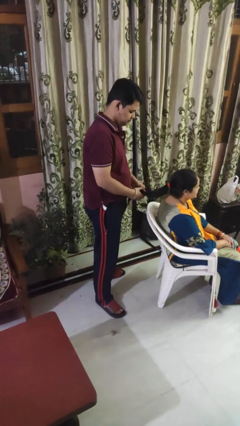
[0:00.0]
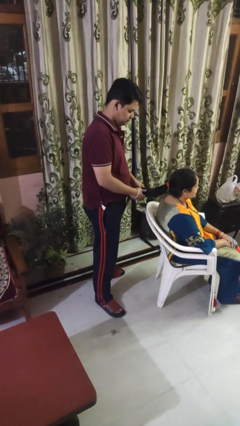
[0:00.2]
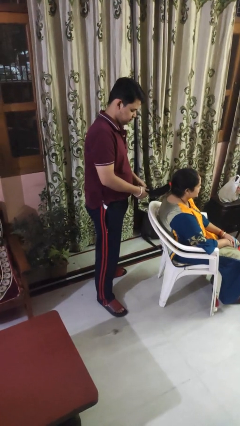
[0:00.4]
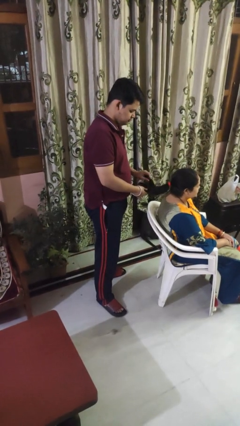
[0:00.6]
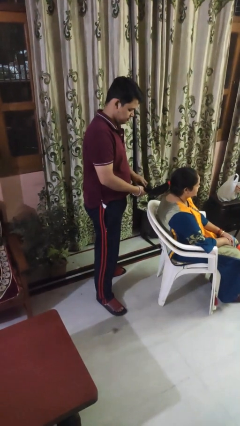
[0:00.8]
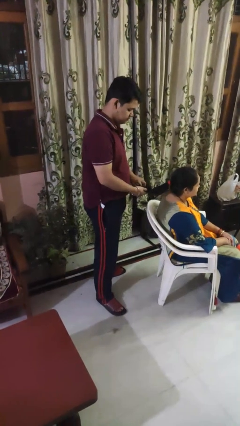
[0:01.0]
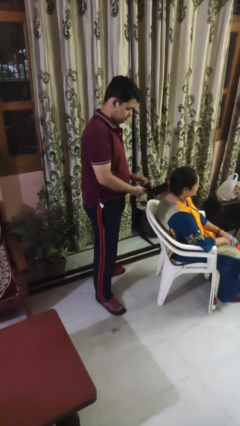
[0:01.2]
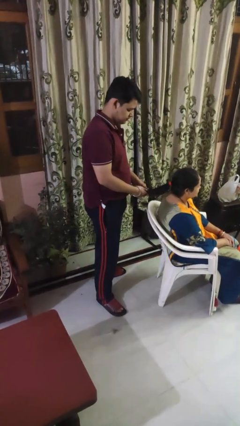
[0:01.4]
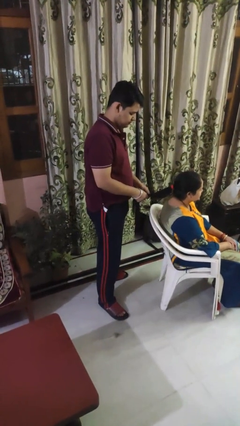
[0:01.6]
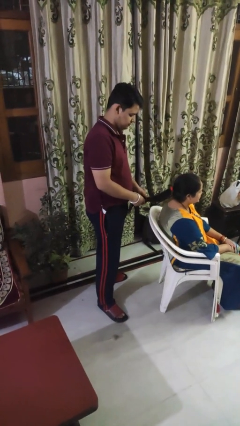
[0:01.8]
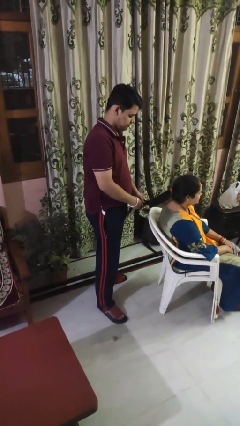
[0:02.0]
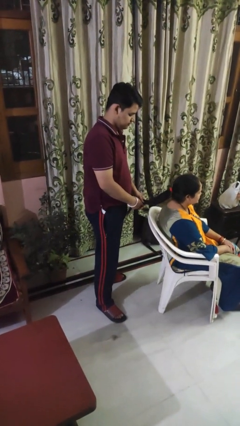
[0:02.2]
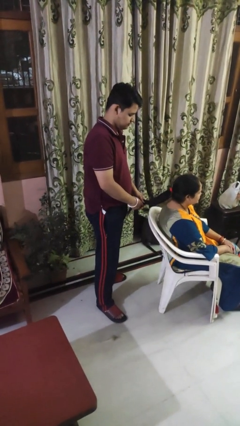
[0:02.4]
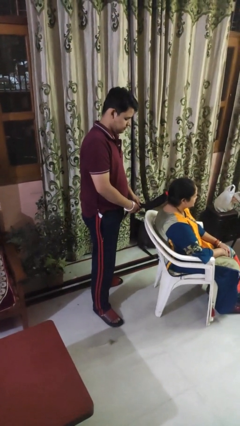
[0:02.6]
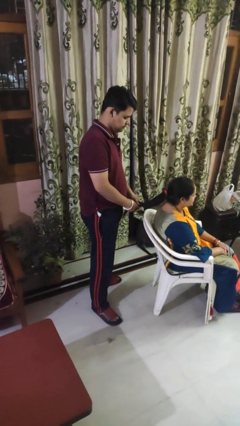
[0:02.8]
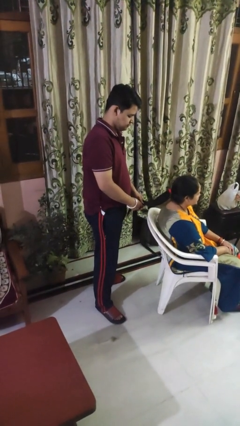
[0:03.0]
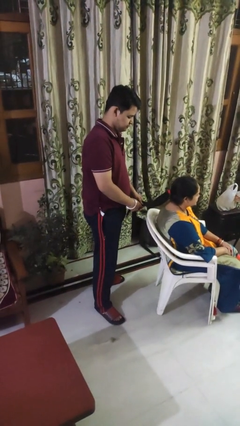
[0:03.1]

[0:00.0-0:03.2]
person braids hair of person

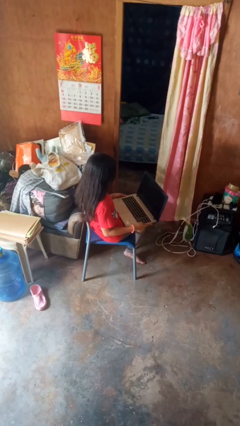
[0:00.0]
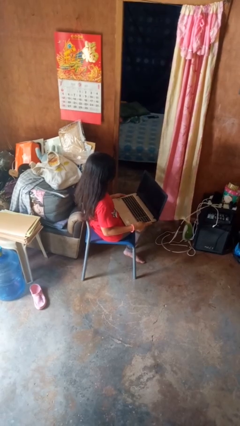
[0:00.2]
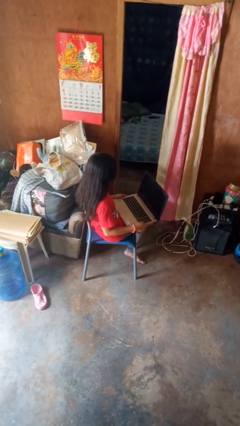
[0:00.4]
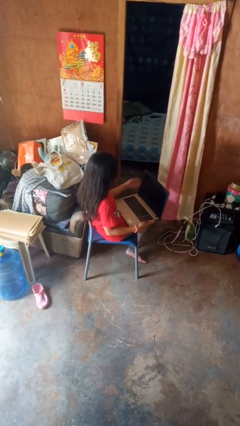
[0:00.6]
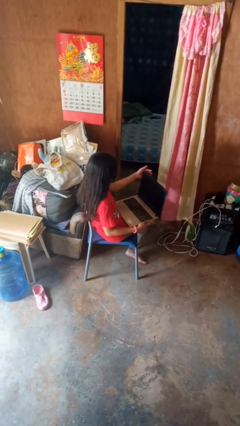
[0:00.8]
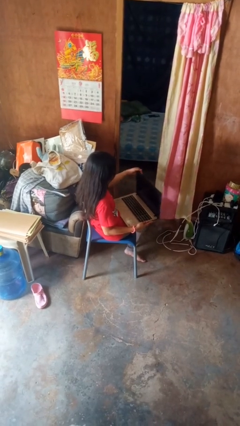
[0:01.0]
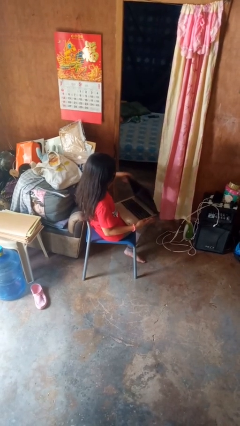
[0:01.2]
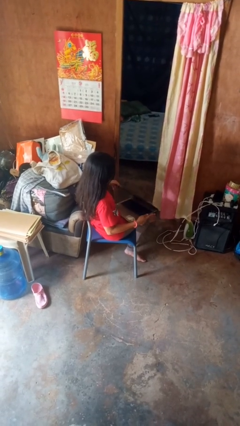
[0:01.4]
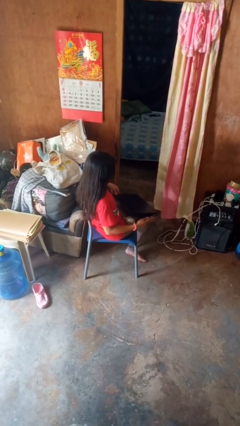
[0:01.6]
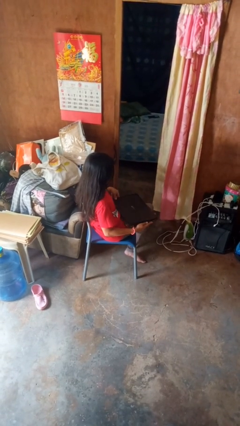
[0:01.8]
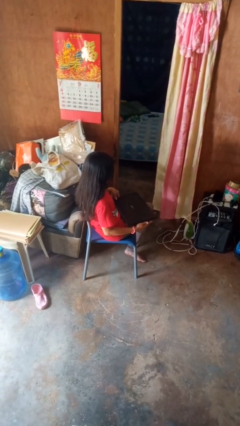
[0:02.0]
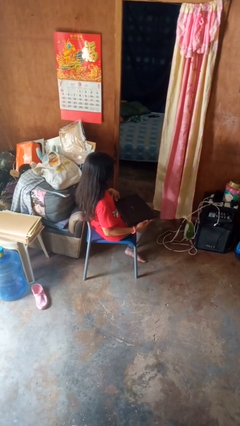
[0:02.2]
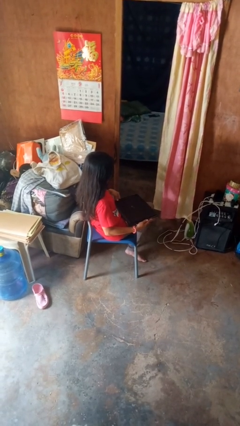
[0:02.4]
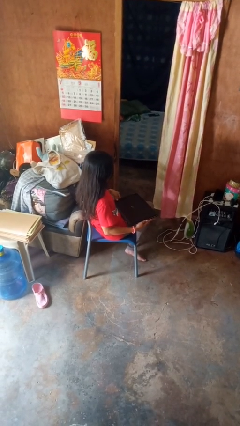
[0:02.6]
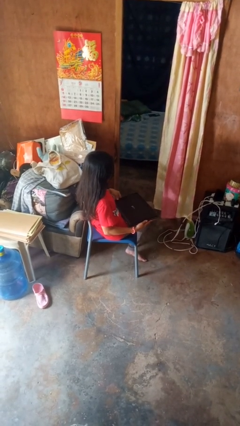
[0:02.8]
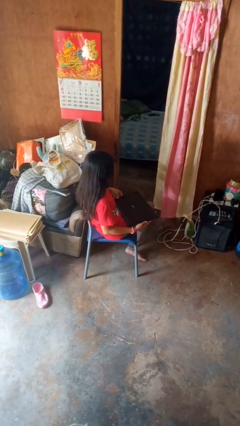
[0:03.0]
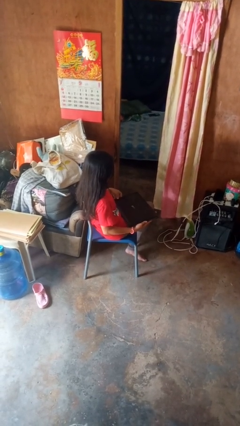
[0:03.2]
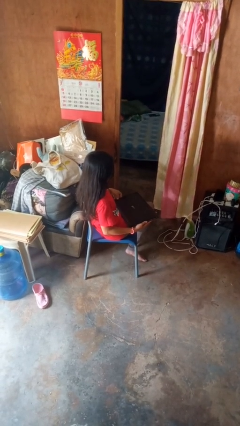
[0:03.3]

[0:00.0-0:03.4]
person closes laptop

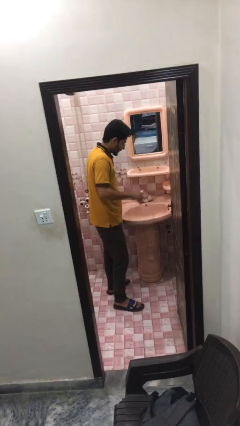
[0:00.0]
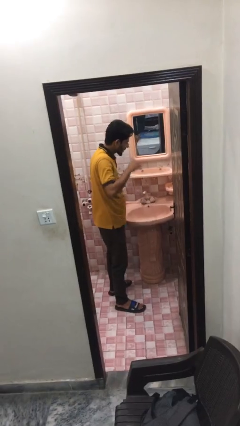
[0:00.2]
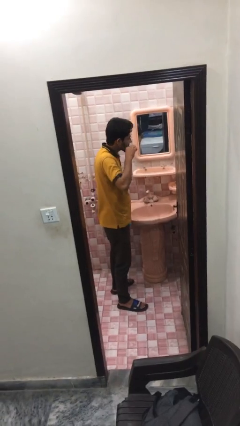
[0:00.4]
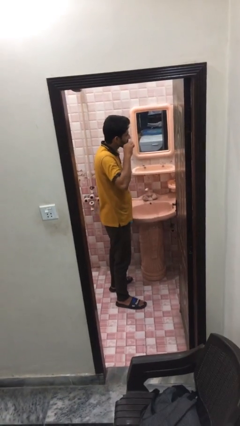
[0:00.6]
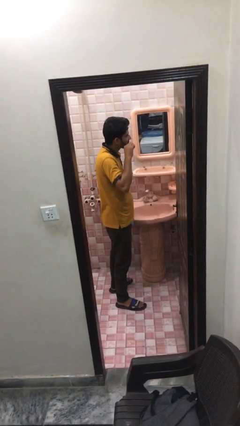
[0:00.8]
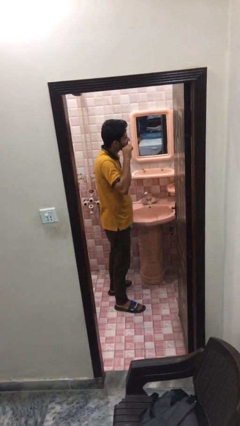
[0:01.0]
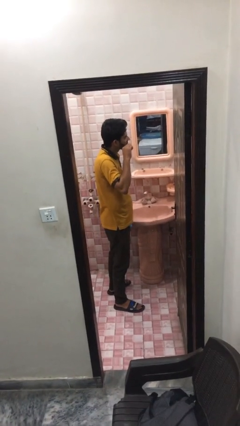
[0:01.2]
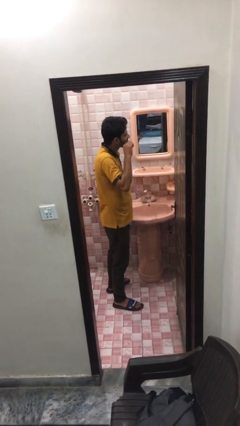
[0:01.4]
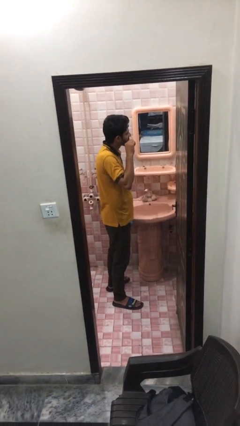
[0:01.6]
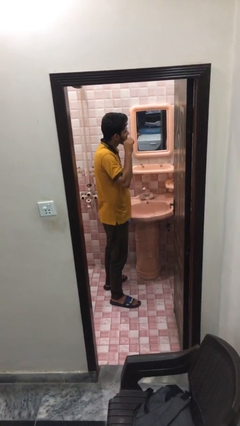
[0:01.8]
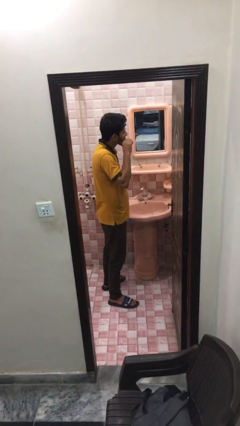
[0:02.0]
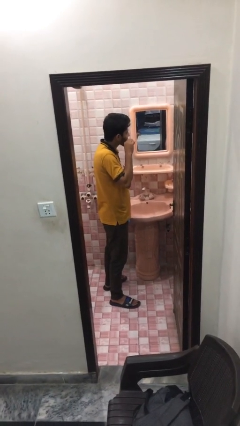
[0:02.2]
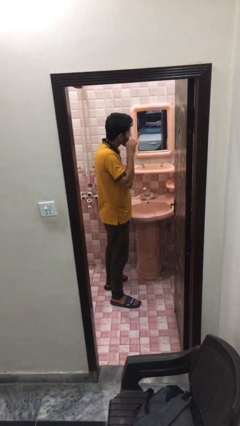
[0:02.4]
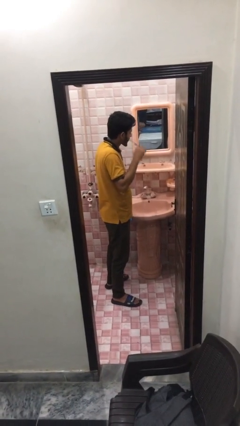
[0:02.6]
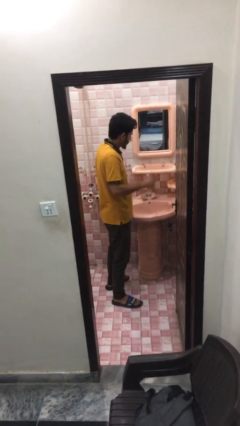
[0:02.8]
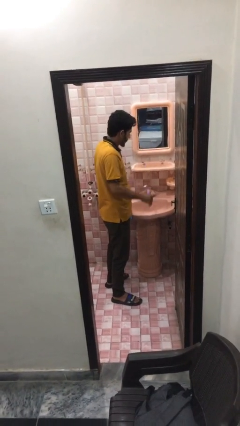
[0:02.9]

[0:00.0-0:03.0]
person brushes teeth

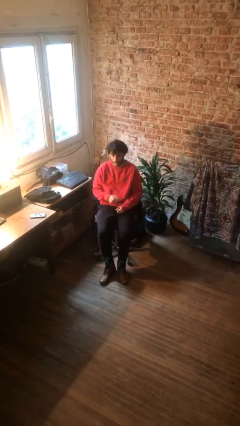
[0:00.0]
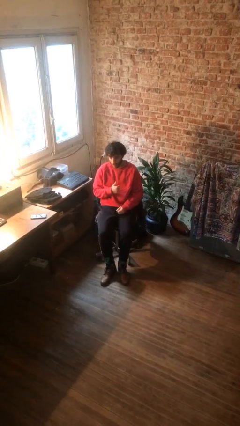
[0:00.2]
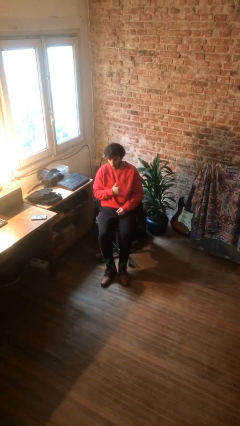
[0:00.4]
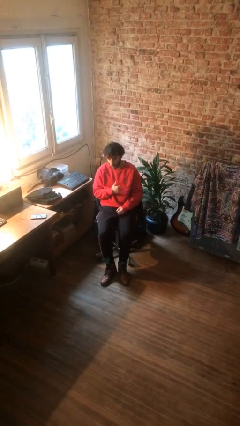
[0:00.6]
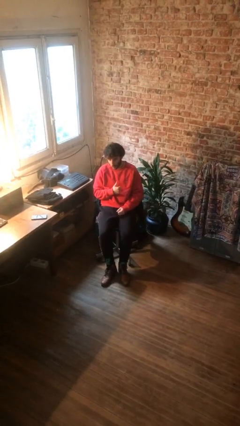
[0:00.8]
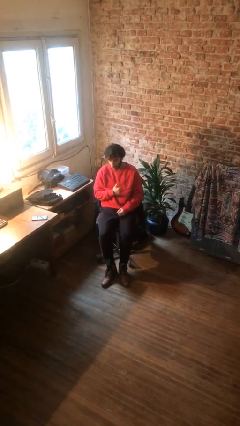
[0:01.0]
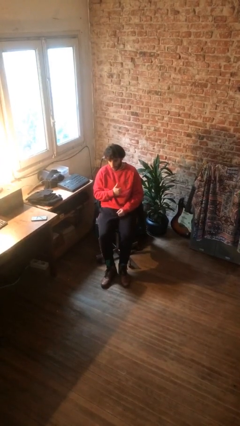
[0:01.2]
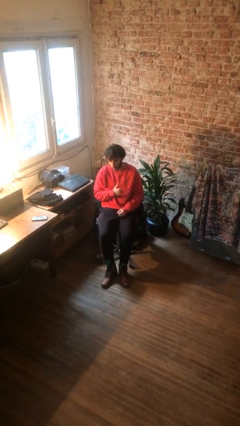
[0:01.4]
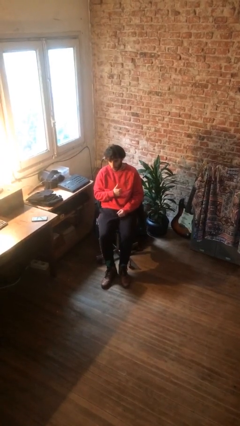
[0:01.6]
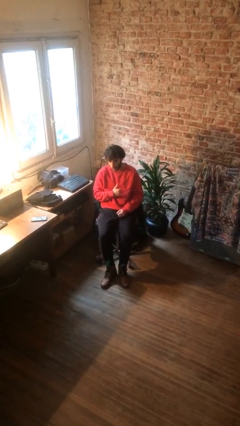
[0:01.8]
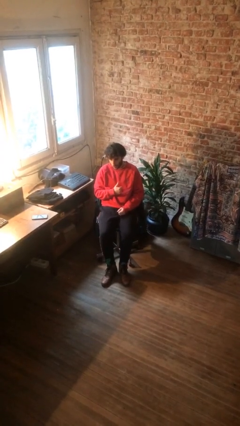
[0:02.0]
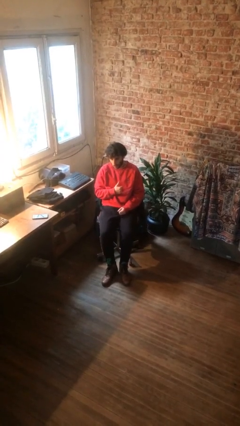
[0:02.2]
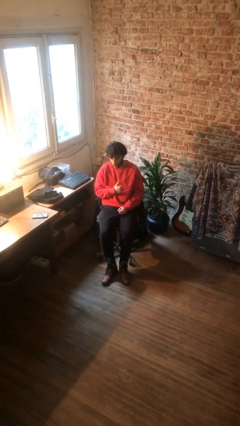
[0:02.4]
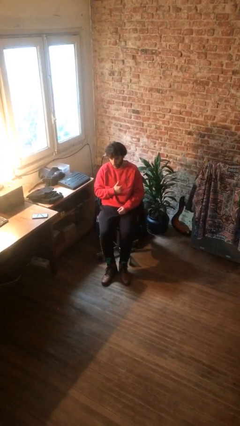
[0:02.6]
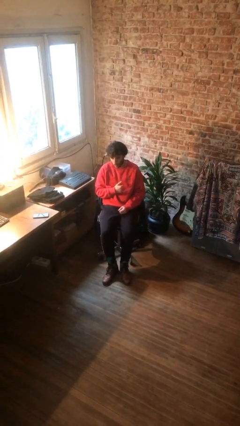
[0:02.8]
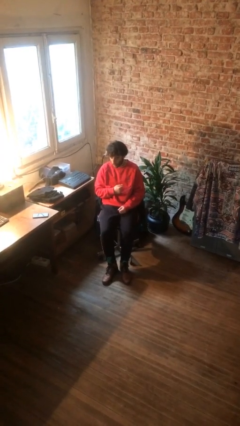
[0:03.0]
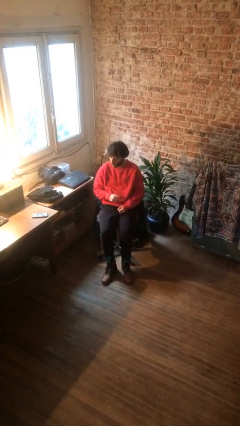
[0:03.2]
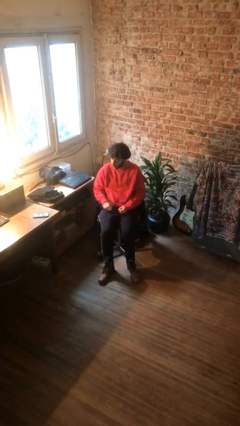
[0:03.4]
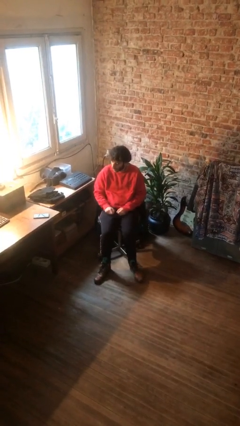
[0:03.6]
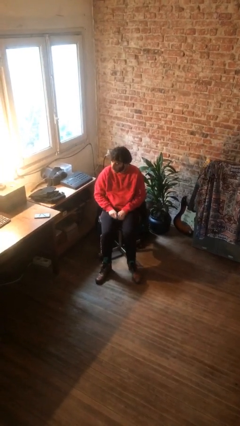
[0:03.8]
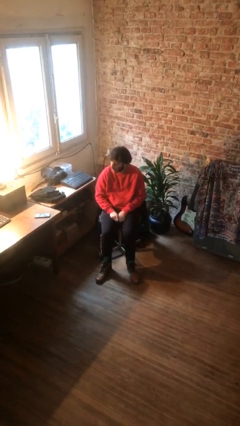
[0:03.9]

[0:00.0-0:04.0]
person gestures thumbs up

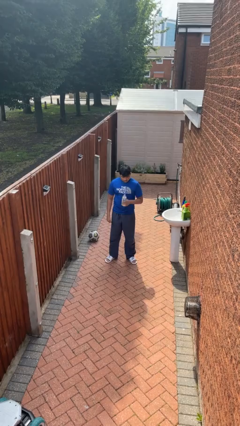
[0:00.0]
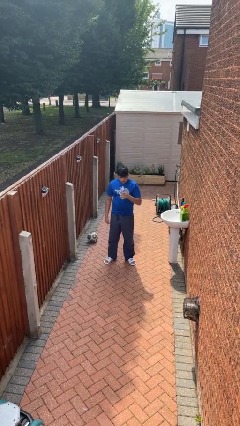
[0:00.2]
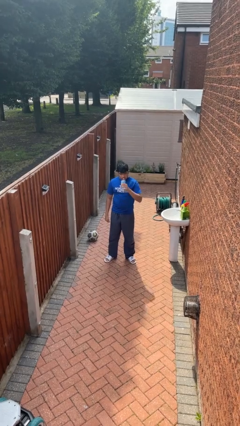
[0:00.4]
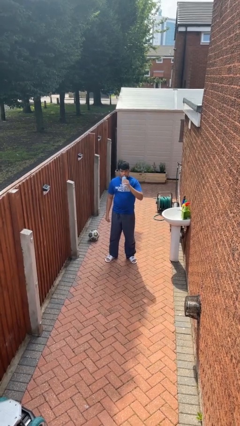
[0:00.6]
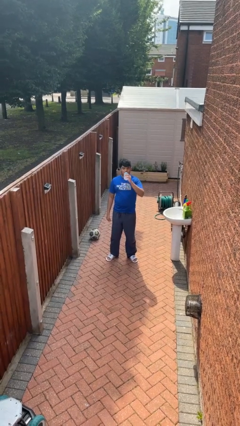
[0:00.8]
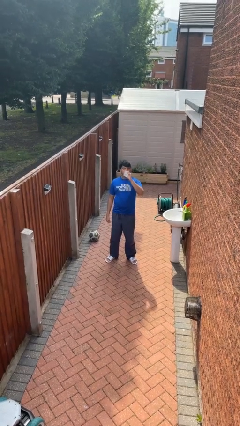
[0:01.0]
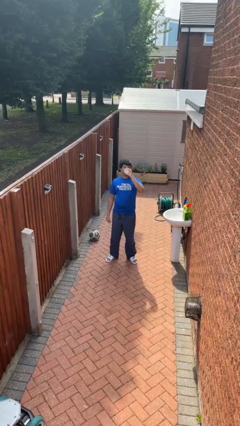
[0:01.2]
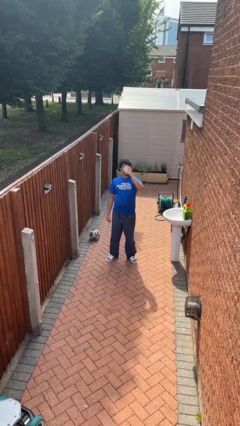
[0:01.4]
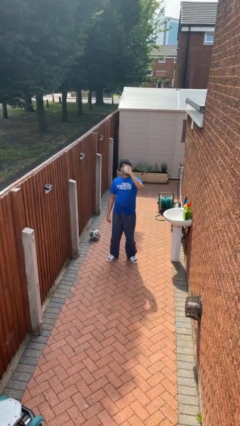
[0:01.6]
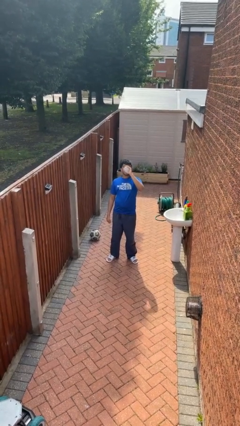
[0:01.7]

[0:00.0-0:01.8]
person drinks from bottle

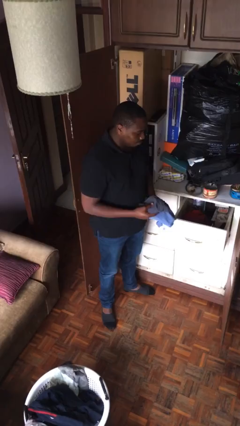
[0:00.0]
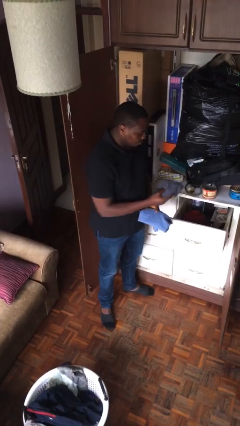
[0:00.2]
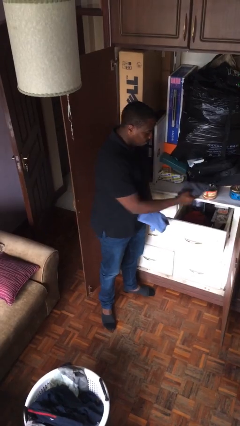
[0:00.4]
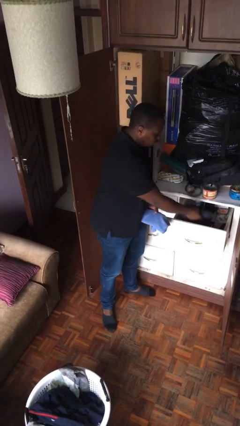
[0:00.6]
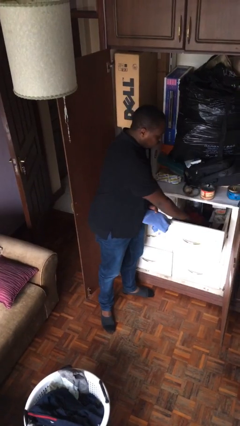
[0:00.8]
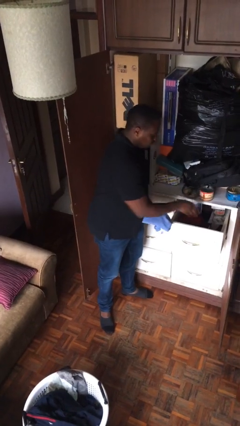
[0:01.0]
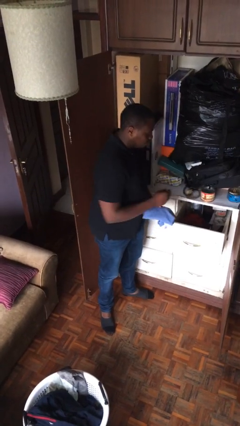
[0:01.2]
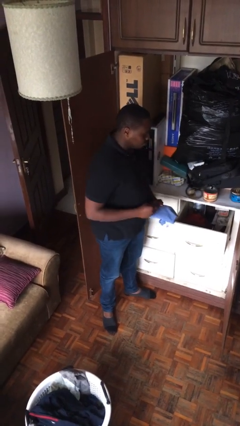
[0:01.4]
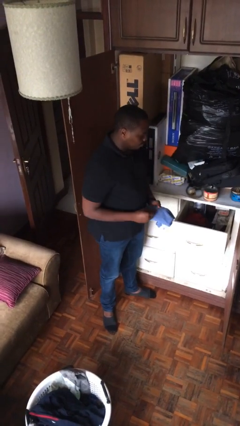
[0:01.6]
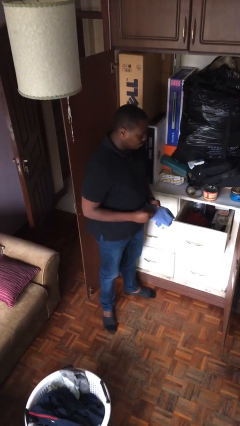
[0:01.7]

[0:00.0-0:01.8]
person puts clothes into dresser

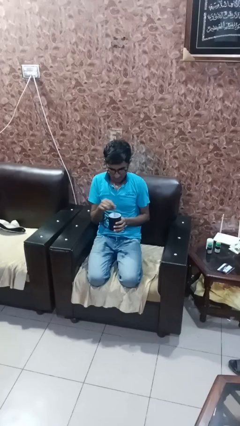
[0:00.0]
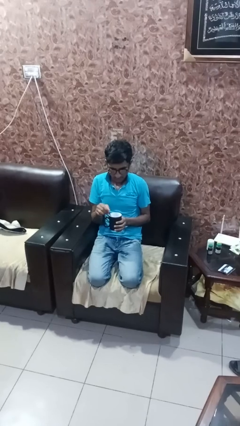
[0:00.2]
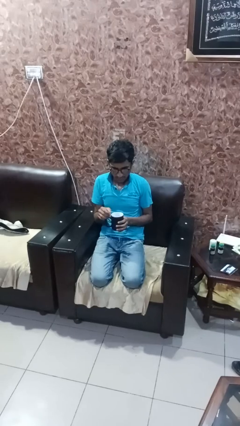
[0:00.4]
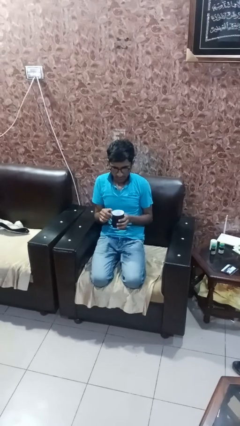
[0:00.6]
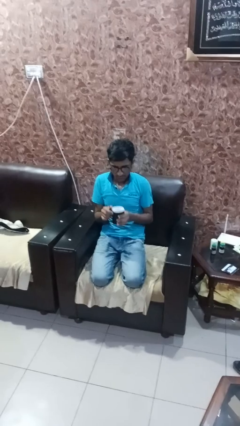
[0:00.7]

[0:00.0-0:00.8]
person stirs mug
